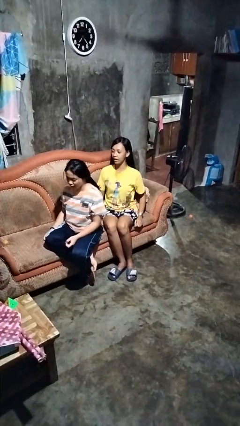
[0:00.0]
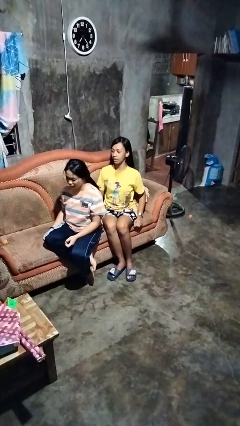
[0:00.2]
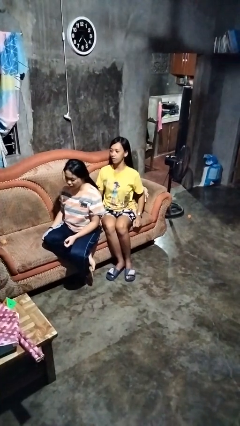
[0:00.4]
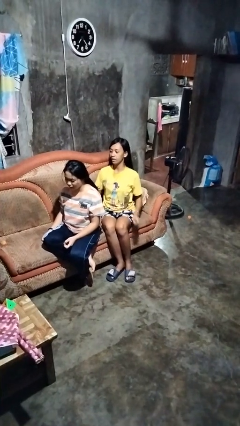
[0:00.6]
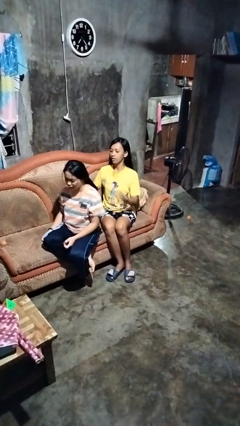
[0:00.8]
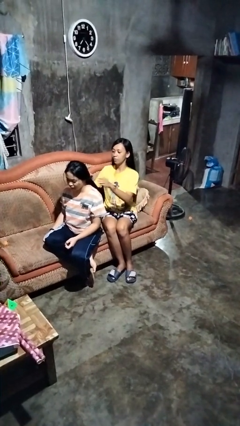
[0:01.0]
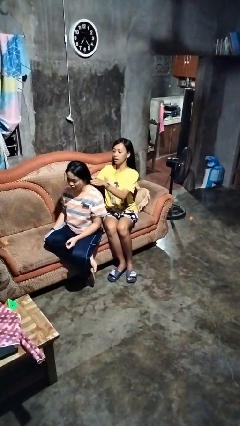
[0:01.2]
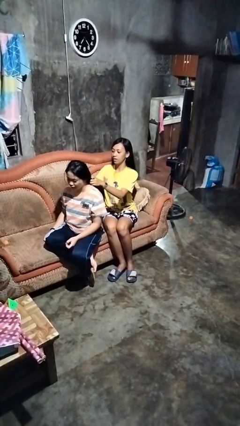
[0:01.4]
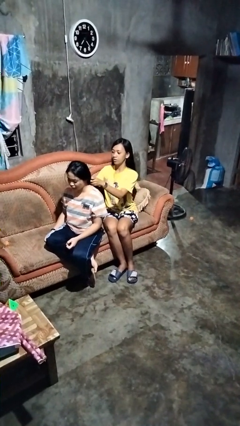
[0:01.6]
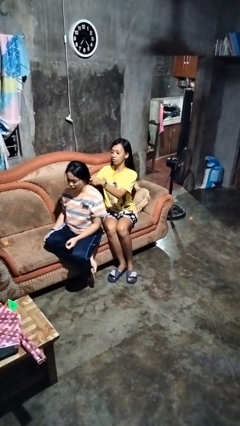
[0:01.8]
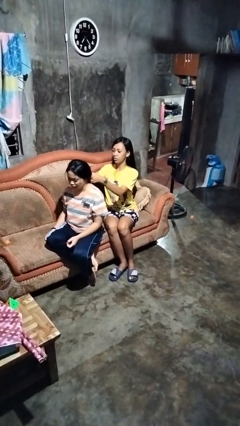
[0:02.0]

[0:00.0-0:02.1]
person braids hair of person

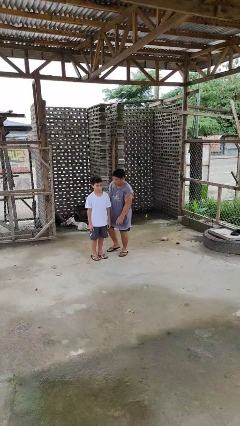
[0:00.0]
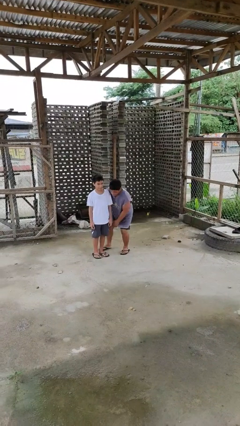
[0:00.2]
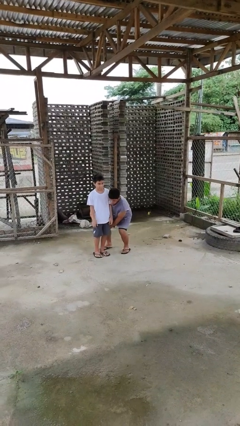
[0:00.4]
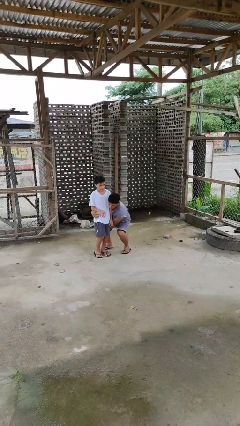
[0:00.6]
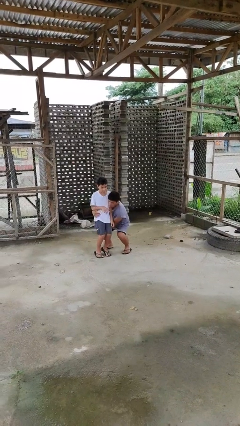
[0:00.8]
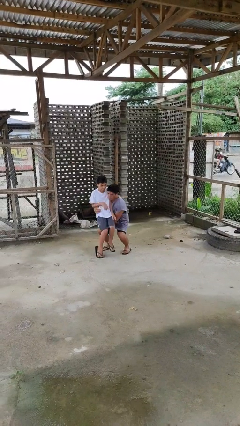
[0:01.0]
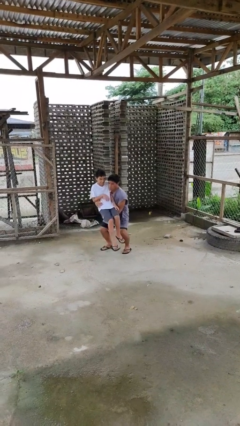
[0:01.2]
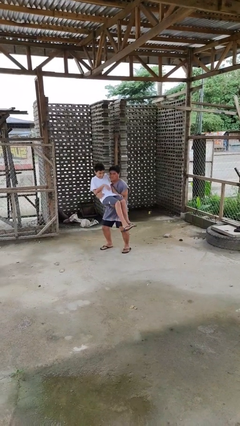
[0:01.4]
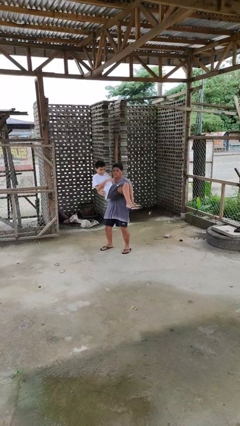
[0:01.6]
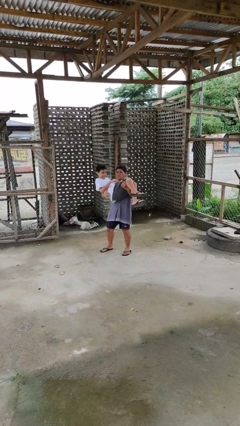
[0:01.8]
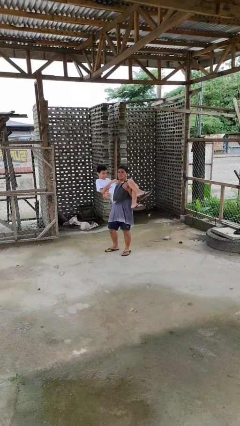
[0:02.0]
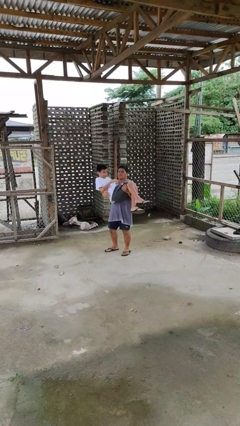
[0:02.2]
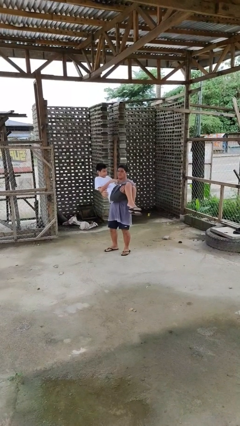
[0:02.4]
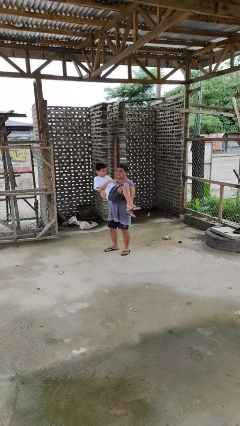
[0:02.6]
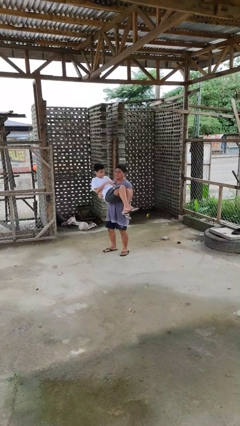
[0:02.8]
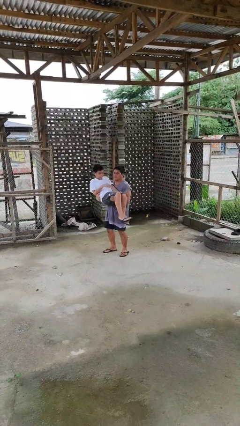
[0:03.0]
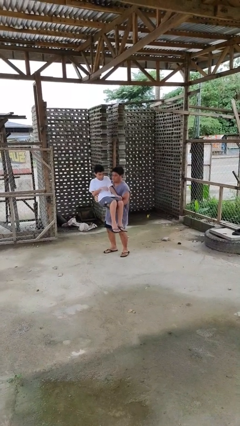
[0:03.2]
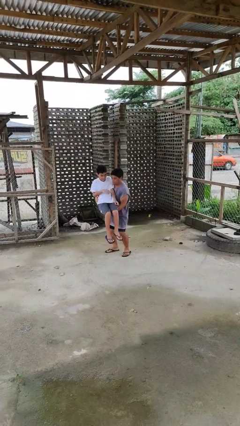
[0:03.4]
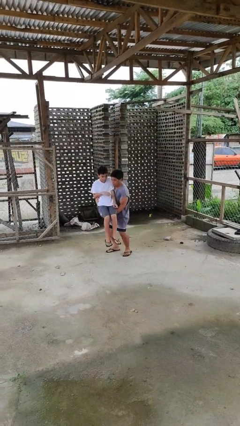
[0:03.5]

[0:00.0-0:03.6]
person picks up person

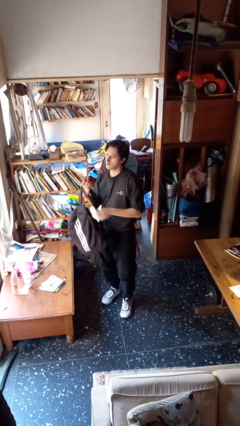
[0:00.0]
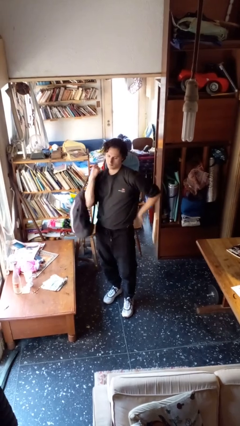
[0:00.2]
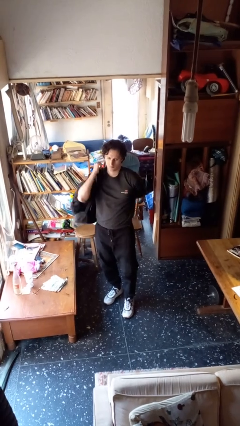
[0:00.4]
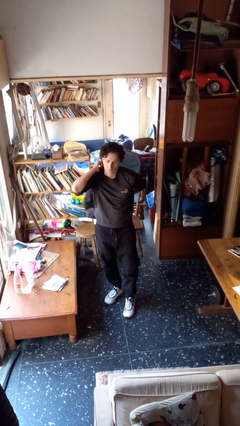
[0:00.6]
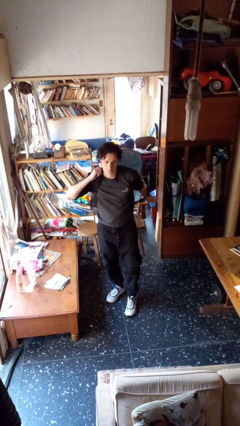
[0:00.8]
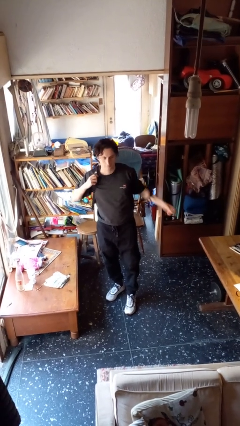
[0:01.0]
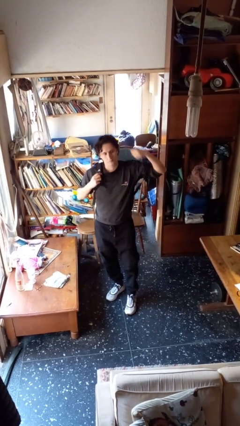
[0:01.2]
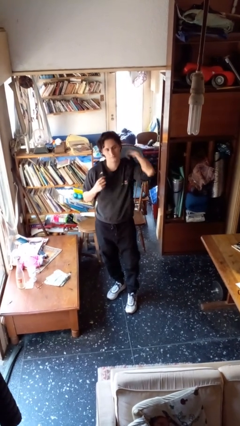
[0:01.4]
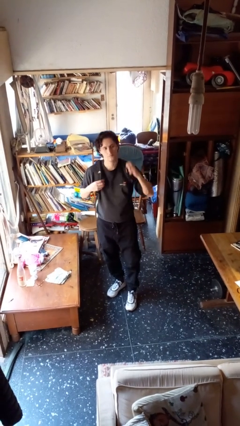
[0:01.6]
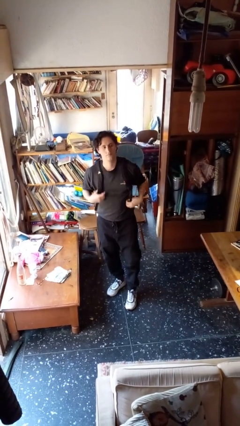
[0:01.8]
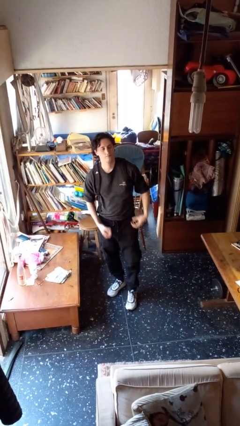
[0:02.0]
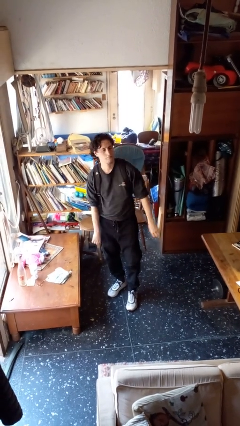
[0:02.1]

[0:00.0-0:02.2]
person puts on backpack

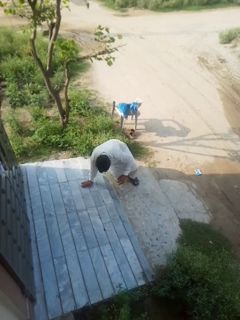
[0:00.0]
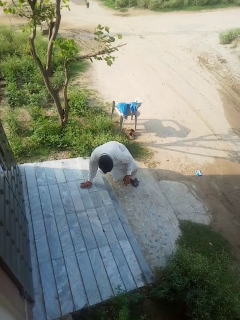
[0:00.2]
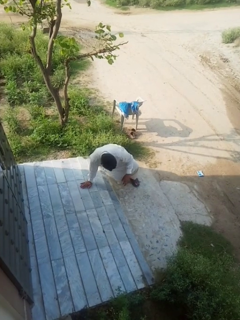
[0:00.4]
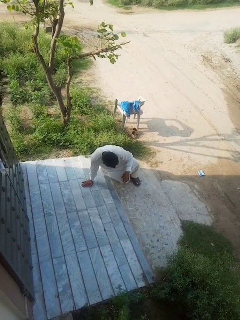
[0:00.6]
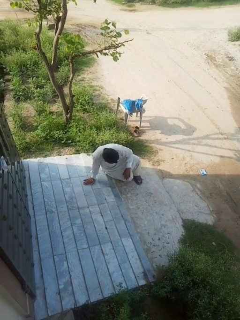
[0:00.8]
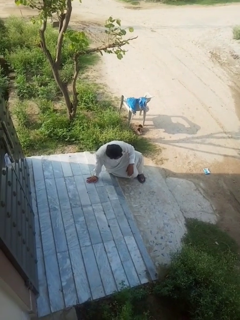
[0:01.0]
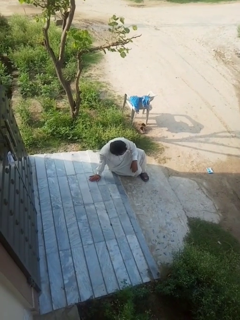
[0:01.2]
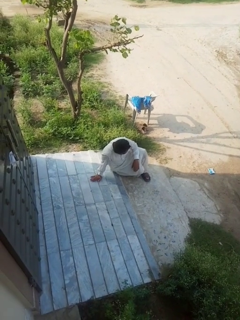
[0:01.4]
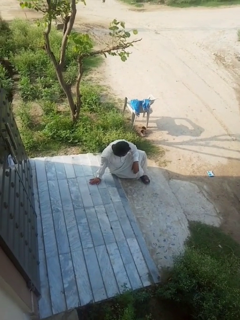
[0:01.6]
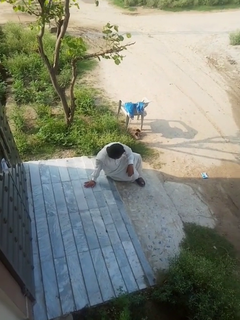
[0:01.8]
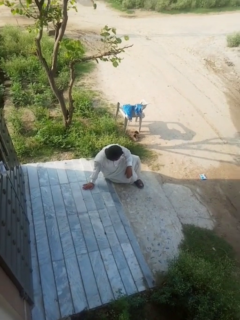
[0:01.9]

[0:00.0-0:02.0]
person lies down on floor

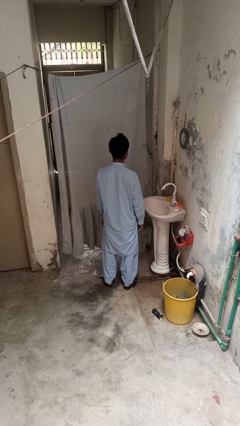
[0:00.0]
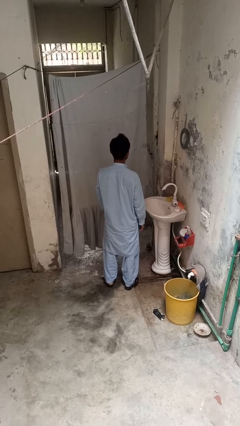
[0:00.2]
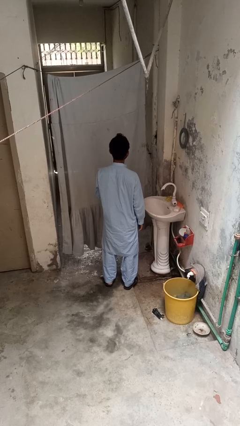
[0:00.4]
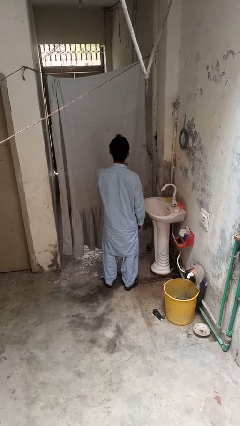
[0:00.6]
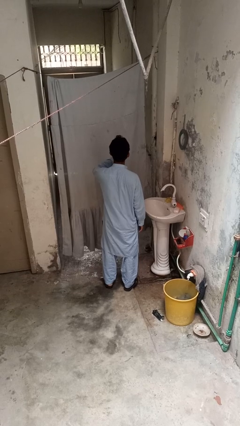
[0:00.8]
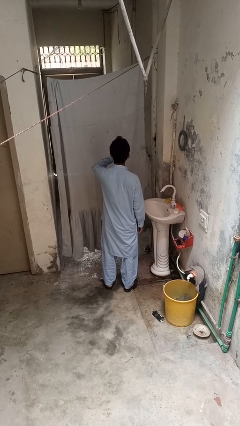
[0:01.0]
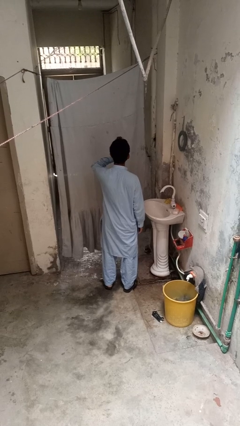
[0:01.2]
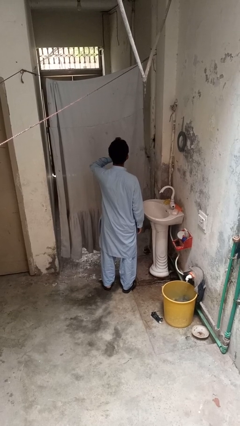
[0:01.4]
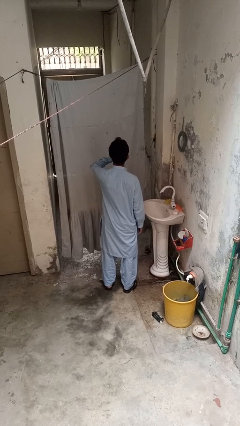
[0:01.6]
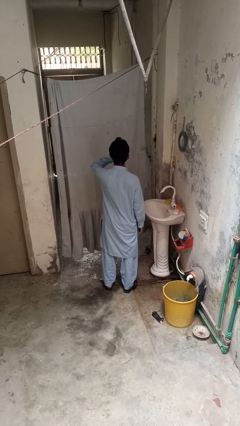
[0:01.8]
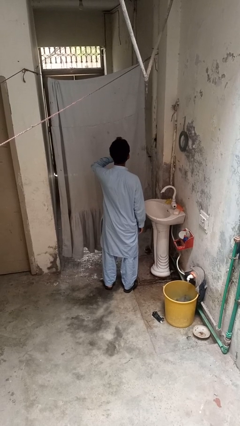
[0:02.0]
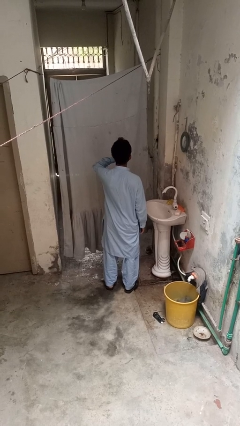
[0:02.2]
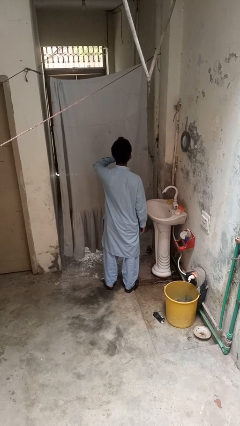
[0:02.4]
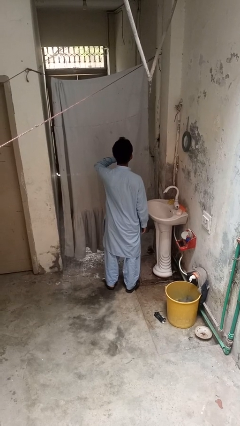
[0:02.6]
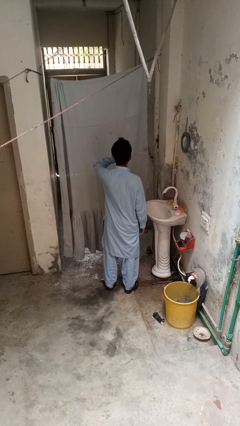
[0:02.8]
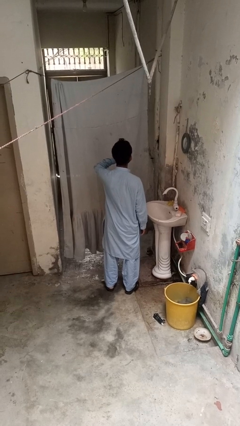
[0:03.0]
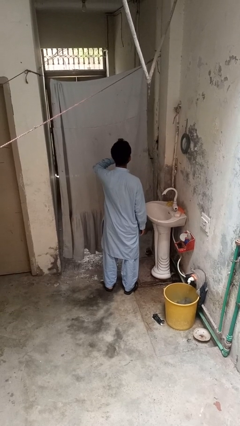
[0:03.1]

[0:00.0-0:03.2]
person yawns

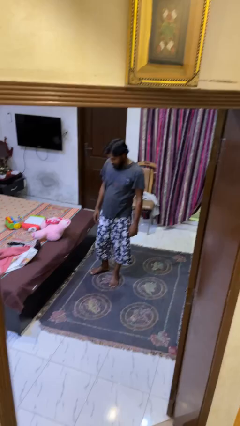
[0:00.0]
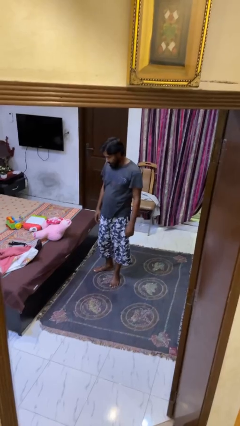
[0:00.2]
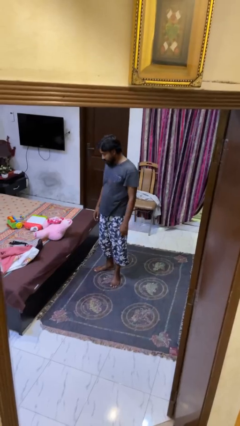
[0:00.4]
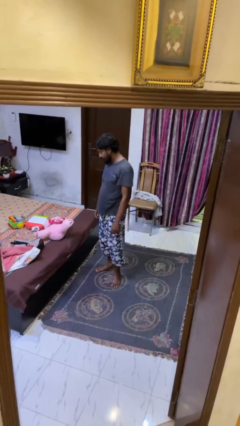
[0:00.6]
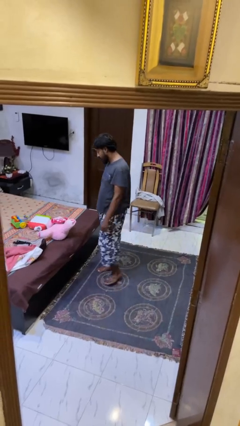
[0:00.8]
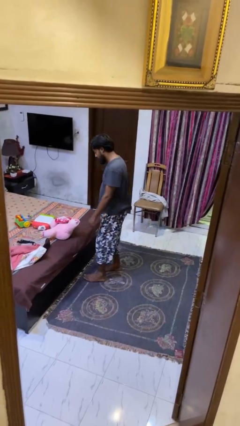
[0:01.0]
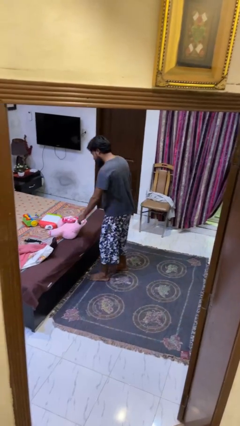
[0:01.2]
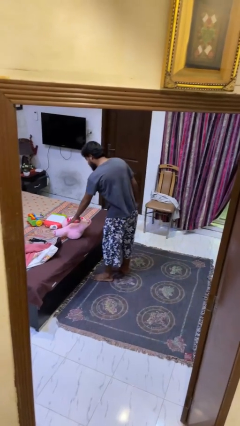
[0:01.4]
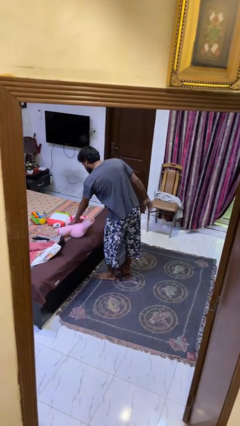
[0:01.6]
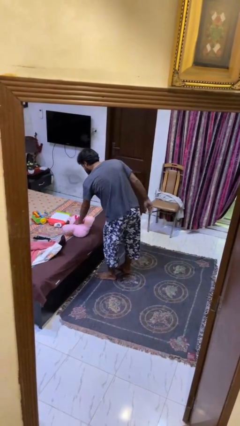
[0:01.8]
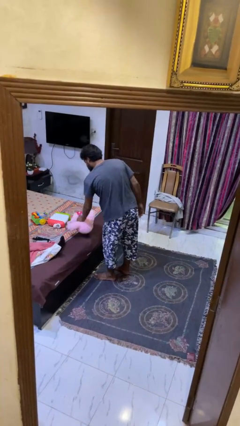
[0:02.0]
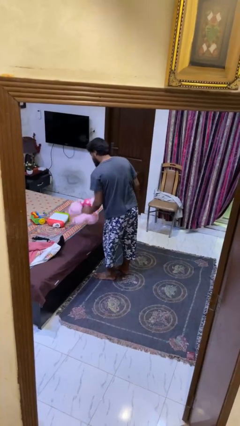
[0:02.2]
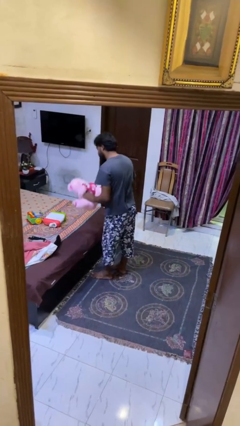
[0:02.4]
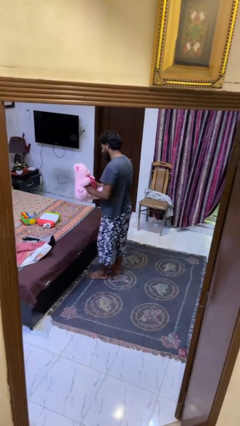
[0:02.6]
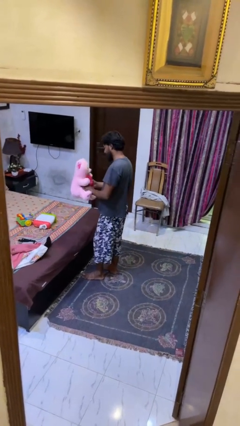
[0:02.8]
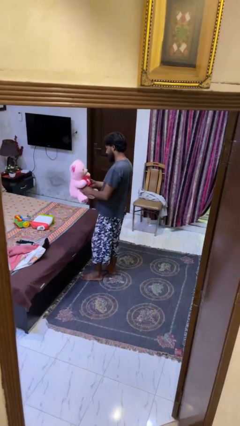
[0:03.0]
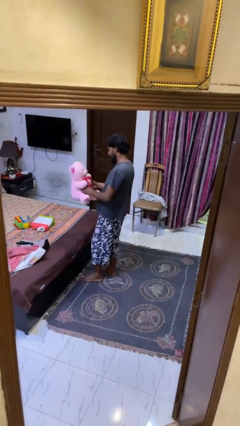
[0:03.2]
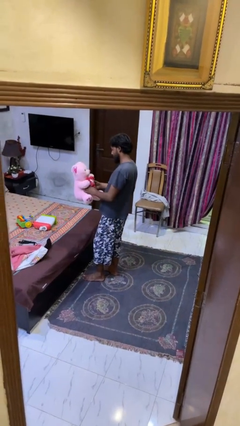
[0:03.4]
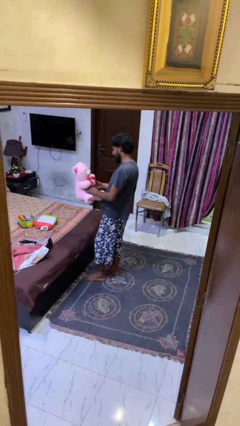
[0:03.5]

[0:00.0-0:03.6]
person picks up object from bed

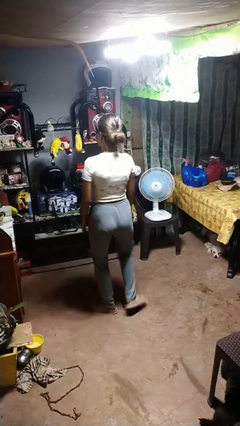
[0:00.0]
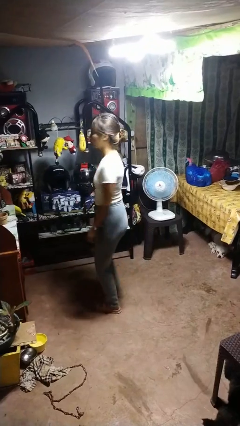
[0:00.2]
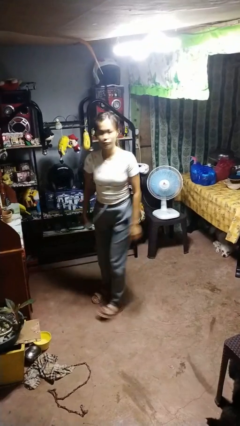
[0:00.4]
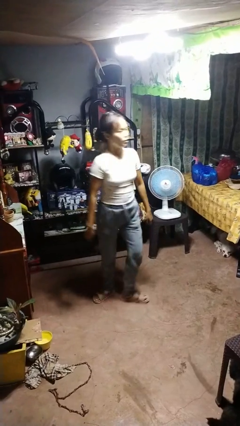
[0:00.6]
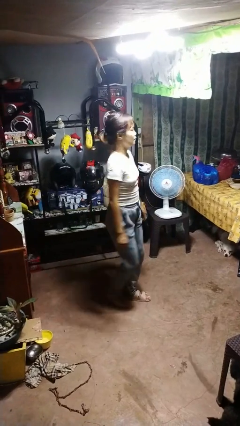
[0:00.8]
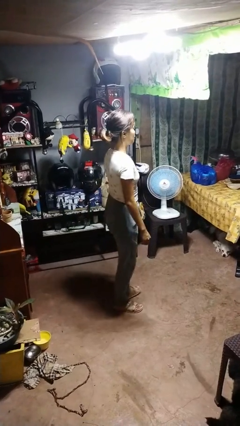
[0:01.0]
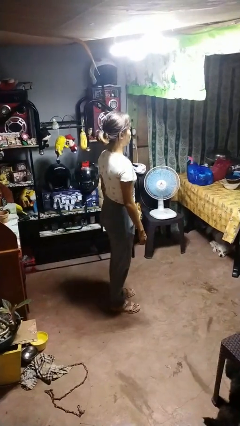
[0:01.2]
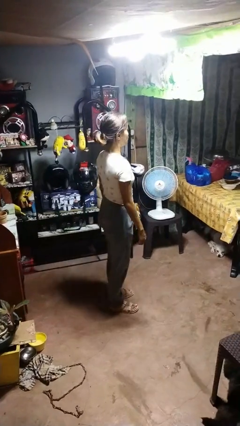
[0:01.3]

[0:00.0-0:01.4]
person twirls
